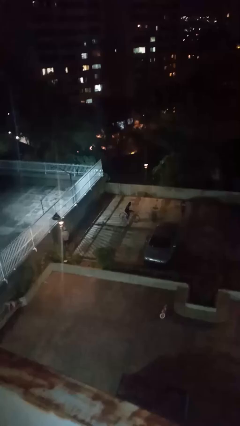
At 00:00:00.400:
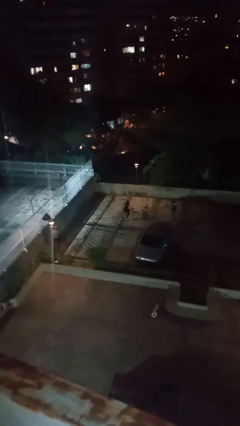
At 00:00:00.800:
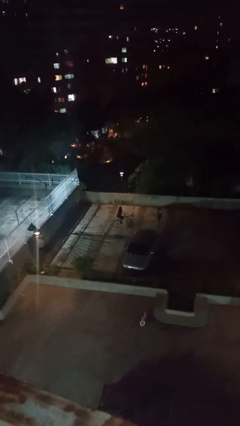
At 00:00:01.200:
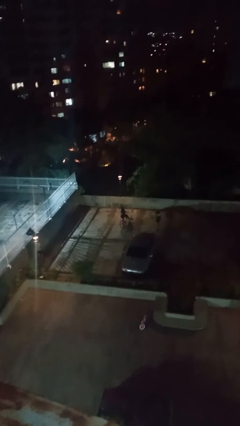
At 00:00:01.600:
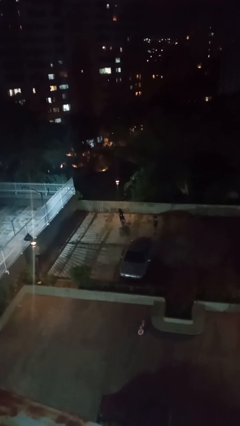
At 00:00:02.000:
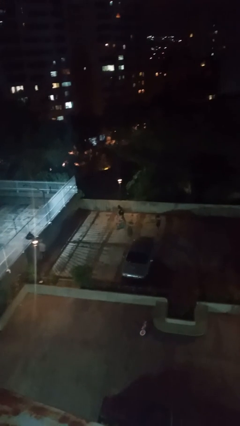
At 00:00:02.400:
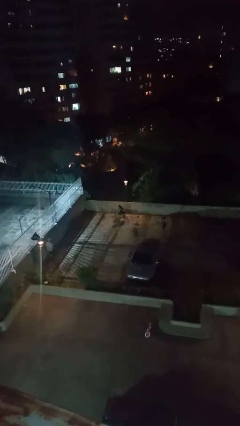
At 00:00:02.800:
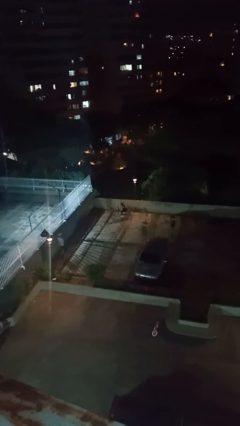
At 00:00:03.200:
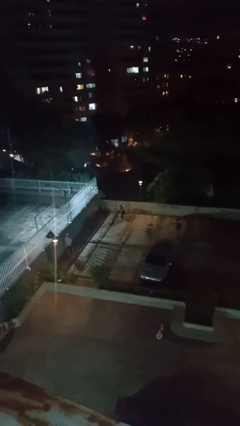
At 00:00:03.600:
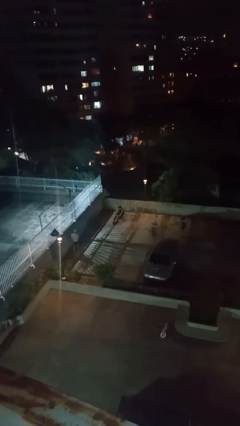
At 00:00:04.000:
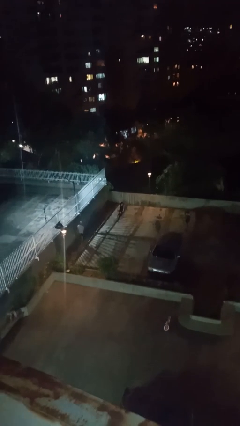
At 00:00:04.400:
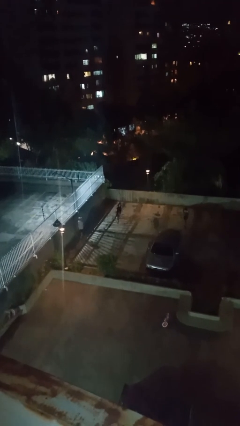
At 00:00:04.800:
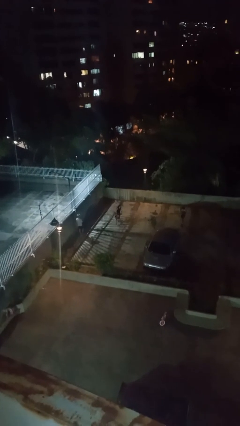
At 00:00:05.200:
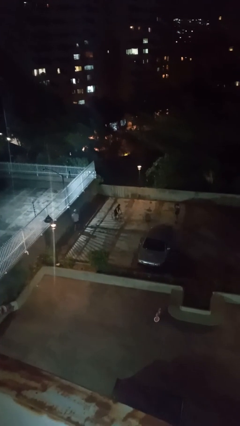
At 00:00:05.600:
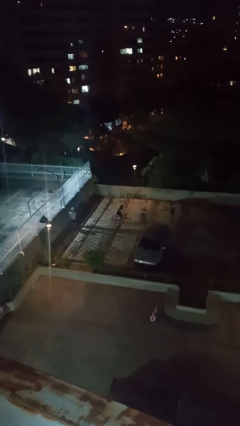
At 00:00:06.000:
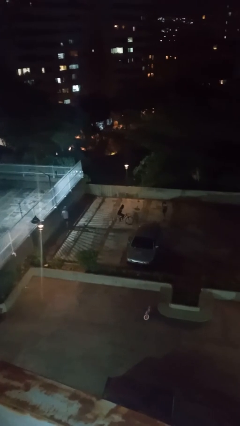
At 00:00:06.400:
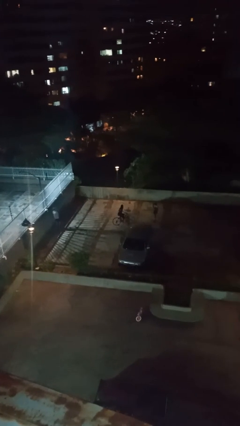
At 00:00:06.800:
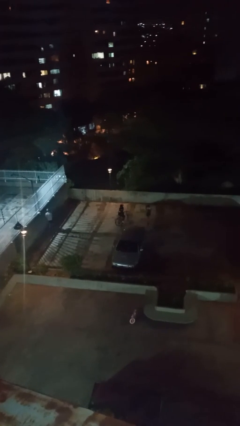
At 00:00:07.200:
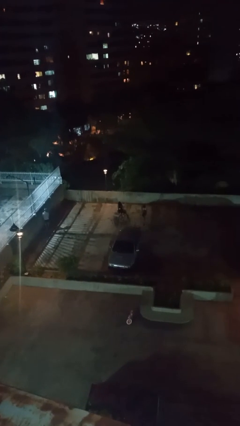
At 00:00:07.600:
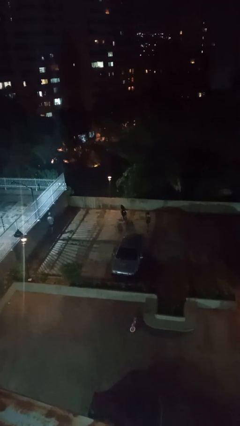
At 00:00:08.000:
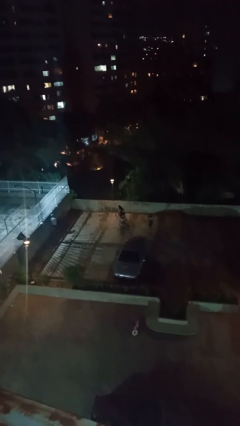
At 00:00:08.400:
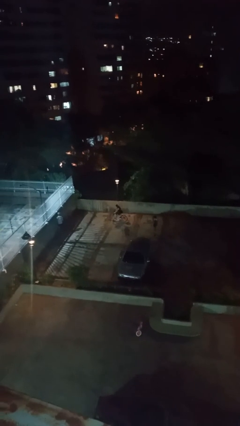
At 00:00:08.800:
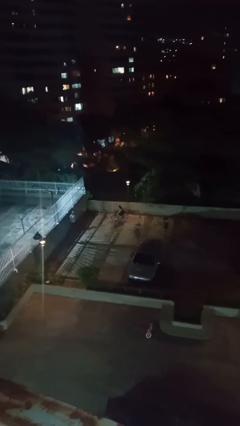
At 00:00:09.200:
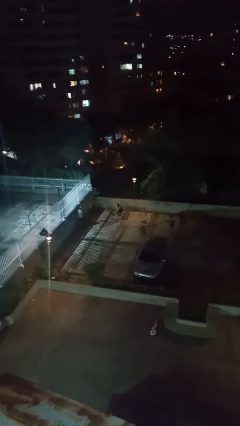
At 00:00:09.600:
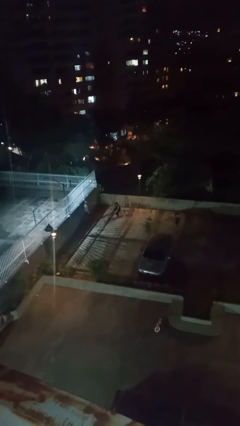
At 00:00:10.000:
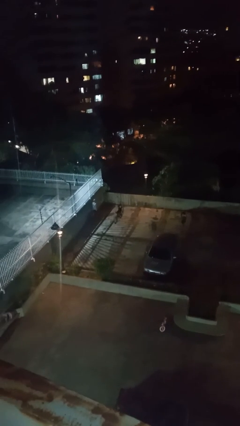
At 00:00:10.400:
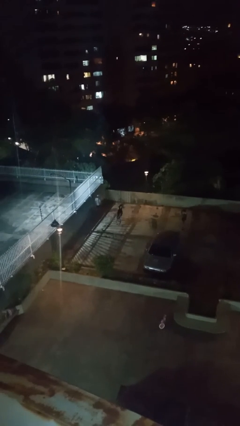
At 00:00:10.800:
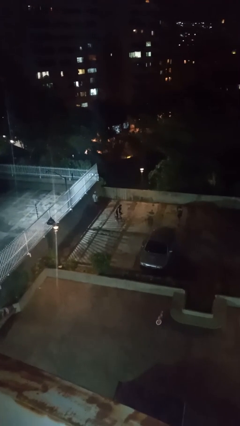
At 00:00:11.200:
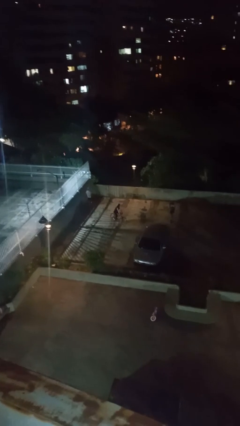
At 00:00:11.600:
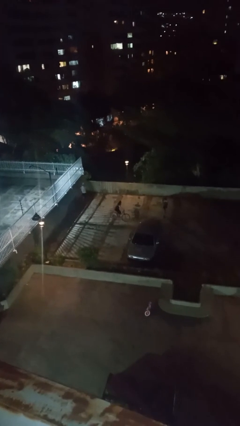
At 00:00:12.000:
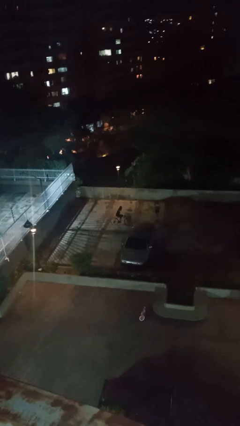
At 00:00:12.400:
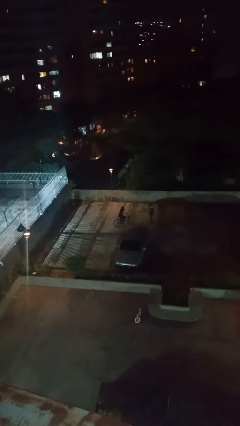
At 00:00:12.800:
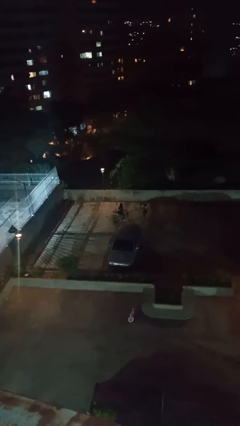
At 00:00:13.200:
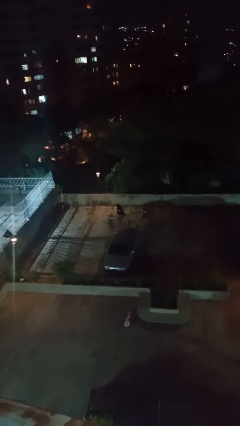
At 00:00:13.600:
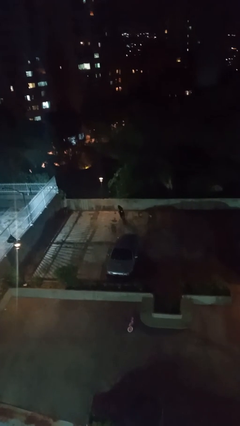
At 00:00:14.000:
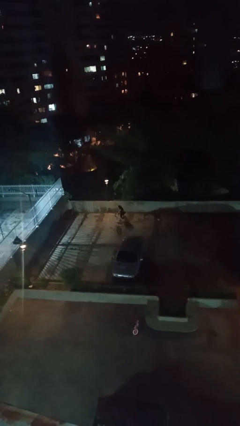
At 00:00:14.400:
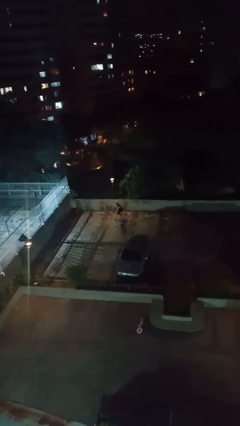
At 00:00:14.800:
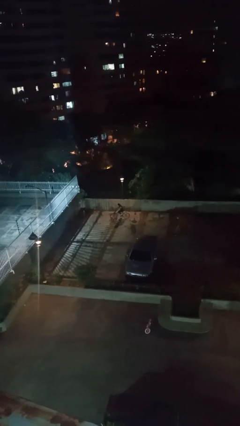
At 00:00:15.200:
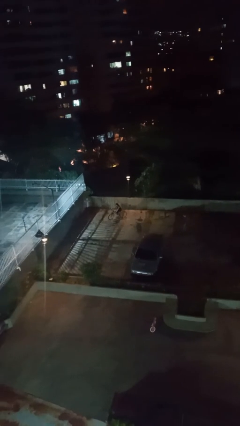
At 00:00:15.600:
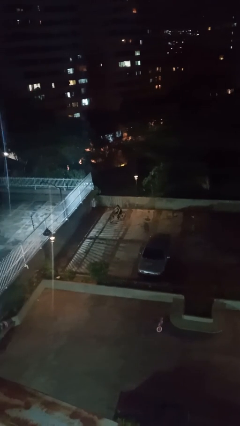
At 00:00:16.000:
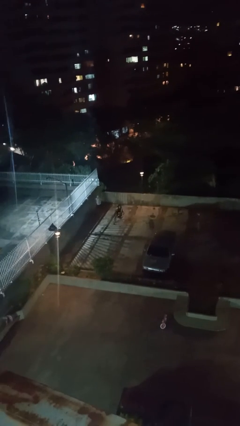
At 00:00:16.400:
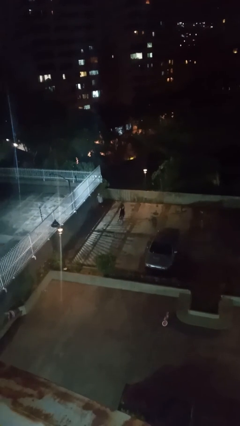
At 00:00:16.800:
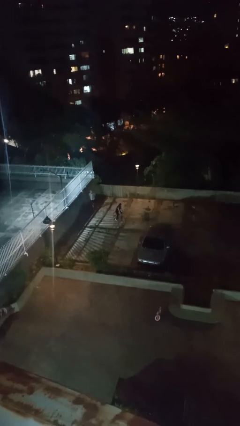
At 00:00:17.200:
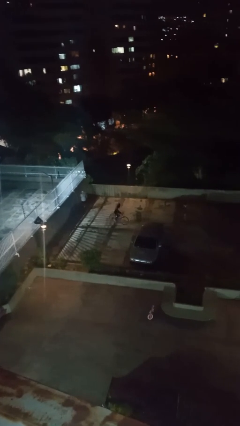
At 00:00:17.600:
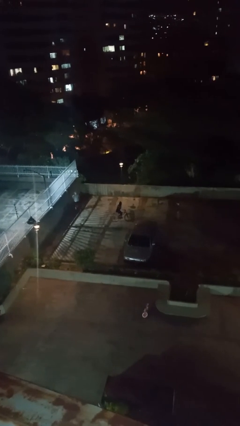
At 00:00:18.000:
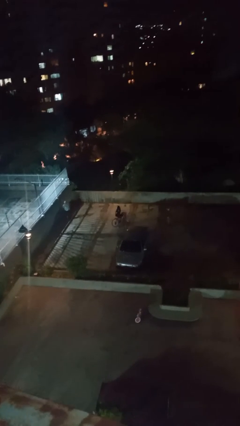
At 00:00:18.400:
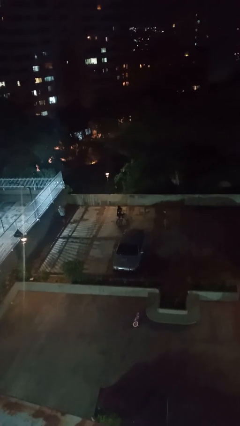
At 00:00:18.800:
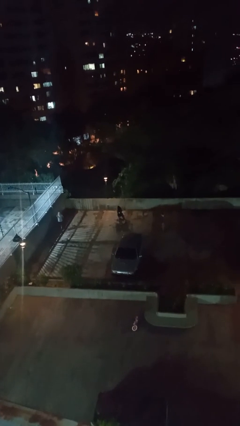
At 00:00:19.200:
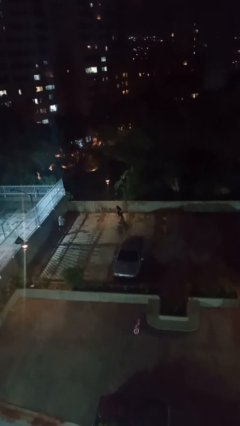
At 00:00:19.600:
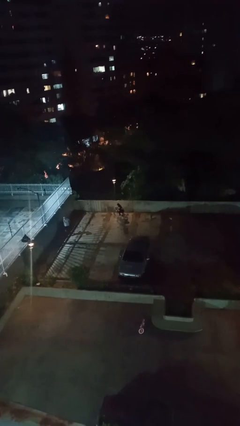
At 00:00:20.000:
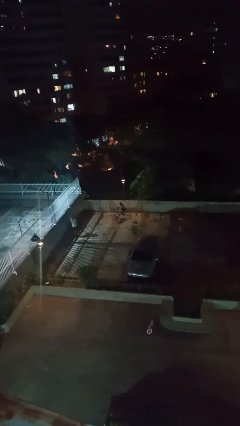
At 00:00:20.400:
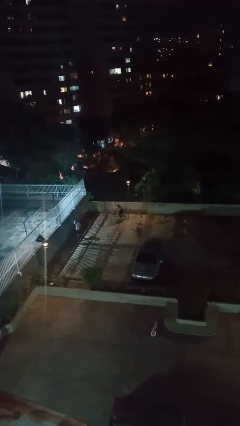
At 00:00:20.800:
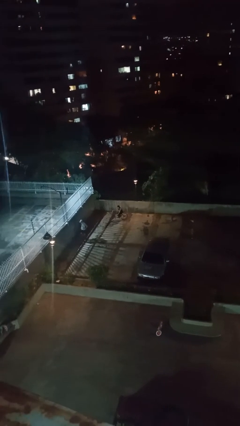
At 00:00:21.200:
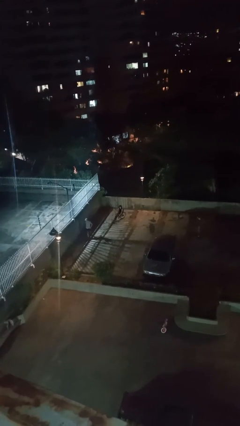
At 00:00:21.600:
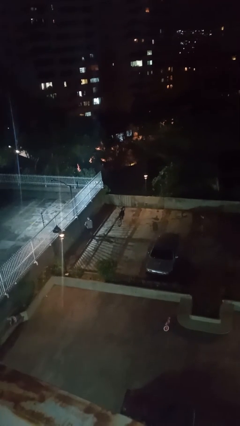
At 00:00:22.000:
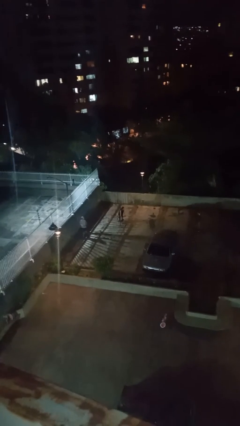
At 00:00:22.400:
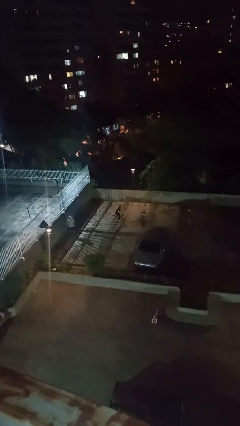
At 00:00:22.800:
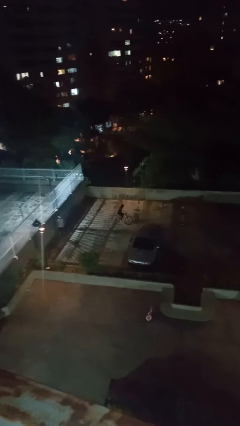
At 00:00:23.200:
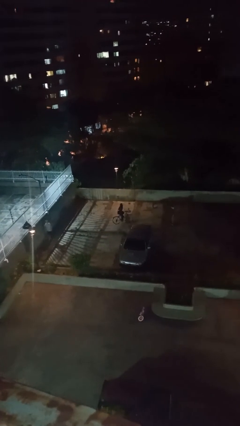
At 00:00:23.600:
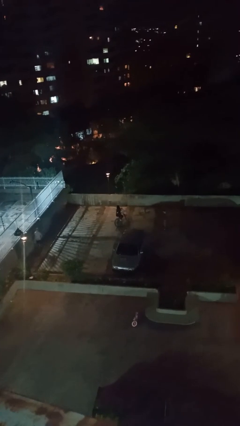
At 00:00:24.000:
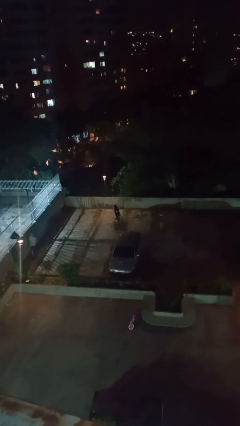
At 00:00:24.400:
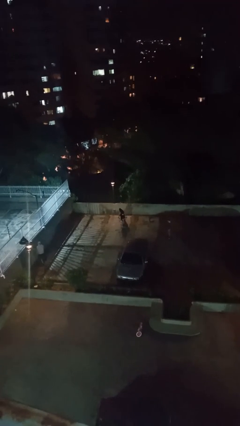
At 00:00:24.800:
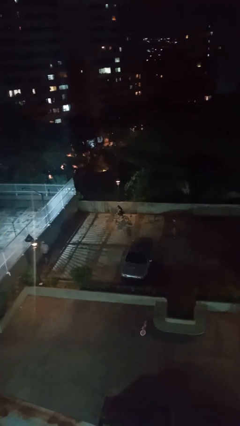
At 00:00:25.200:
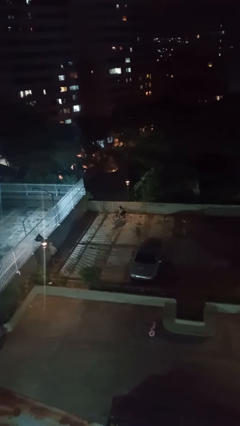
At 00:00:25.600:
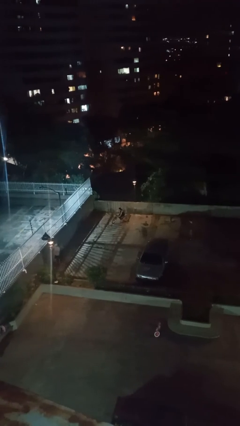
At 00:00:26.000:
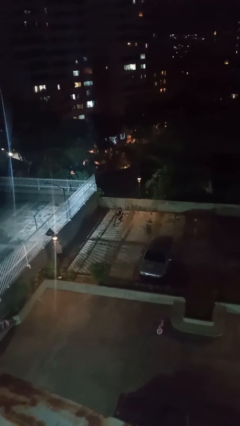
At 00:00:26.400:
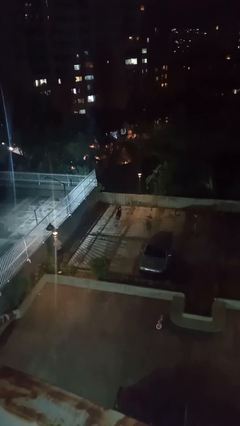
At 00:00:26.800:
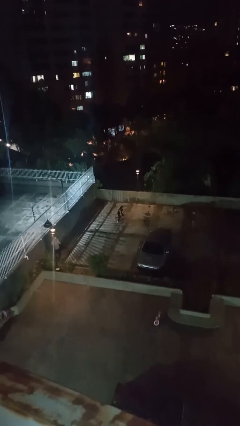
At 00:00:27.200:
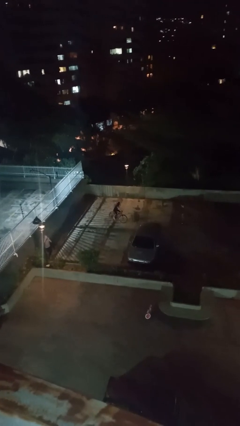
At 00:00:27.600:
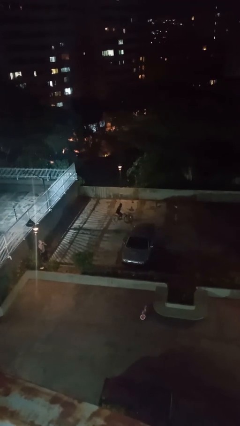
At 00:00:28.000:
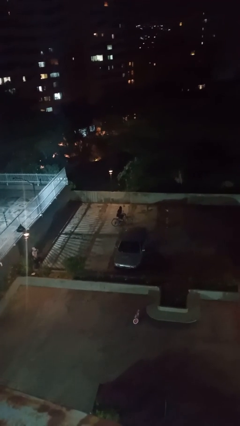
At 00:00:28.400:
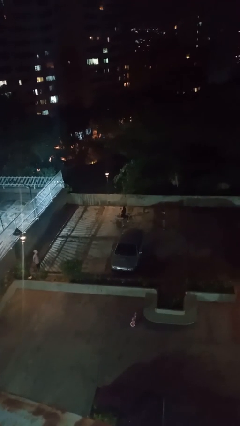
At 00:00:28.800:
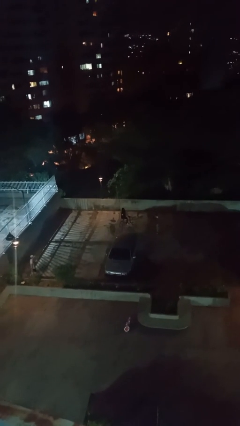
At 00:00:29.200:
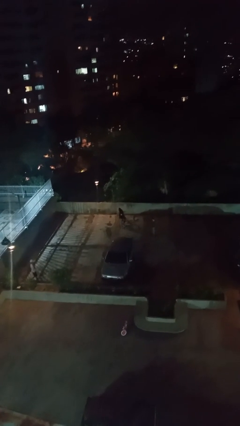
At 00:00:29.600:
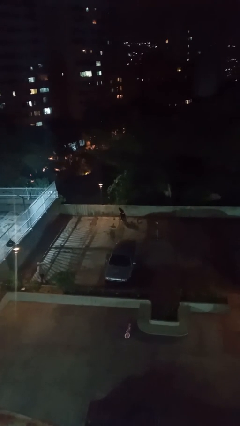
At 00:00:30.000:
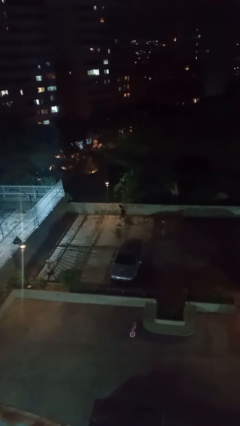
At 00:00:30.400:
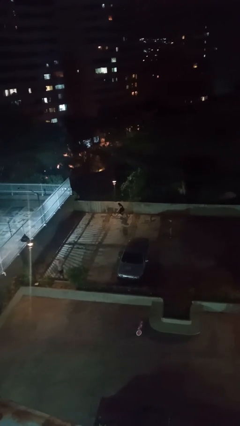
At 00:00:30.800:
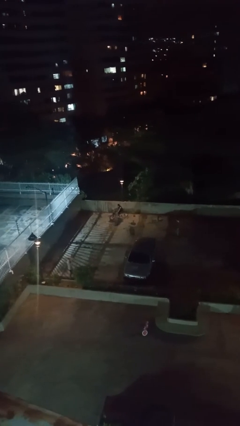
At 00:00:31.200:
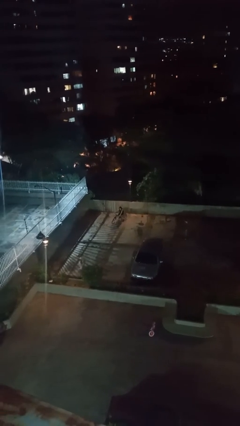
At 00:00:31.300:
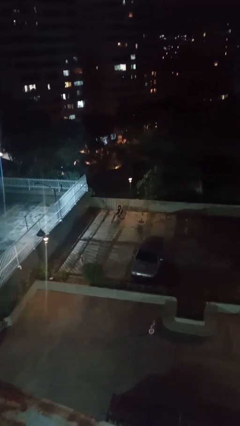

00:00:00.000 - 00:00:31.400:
person rides bicycle

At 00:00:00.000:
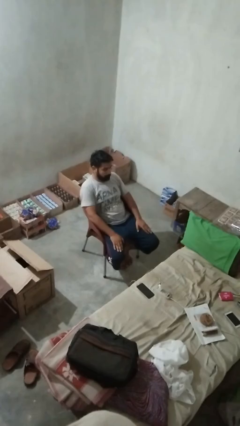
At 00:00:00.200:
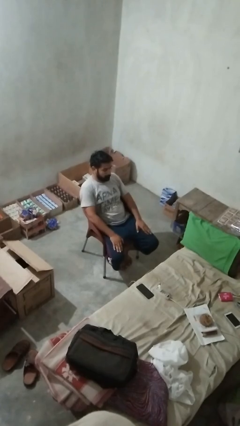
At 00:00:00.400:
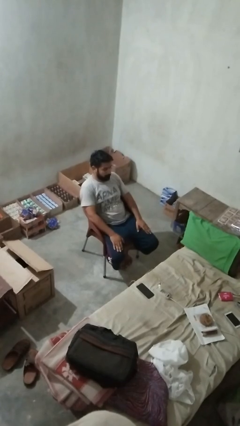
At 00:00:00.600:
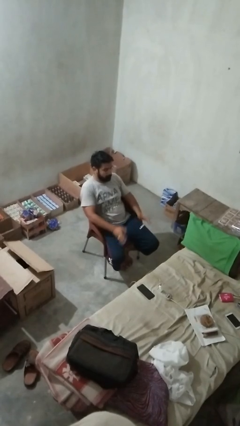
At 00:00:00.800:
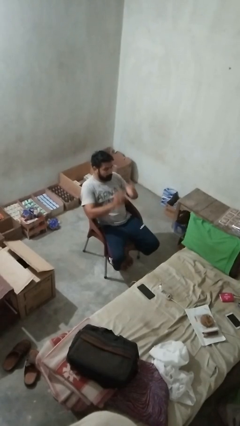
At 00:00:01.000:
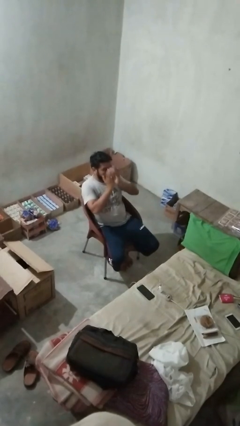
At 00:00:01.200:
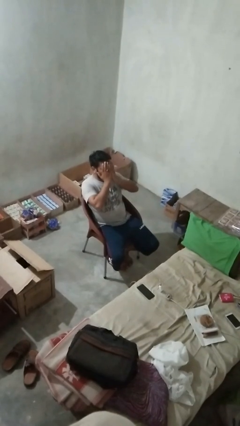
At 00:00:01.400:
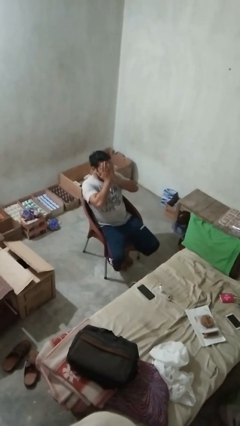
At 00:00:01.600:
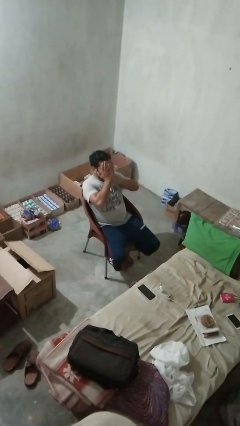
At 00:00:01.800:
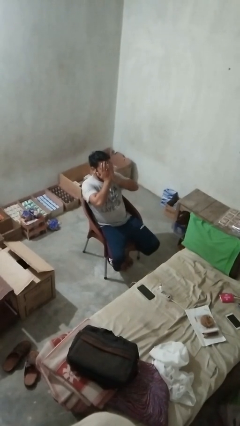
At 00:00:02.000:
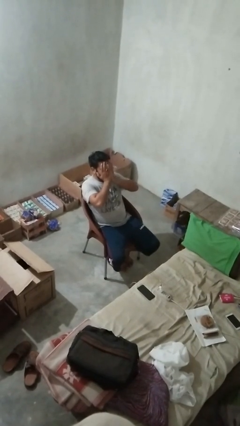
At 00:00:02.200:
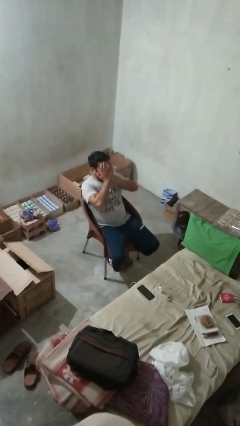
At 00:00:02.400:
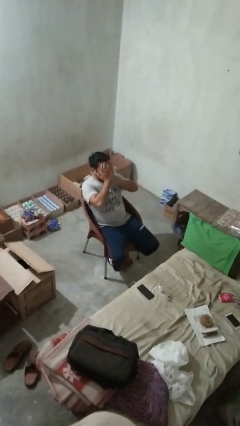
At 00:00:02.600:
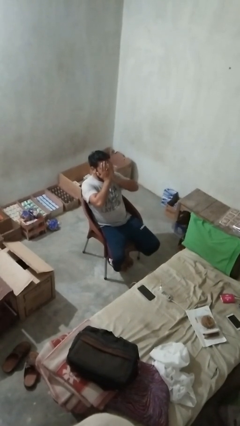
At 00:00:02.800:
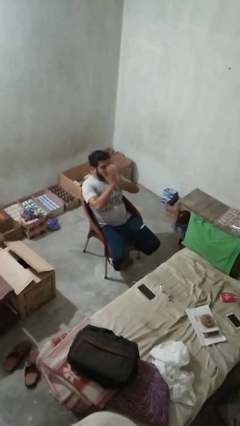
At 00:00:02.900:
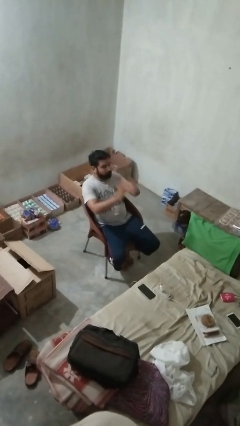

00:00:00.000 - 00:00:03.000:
person covers face with hands
